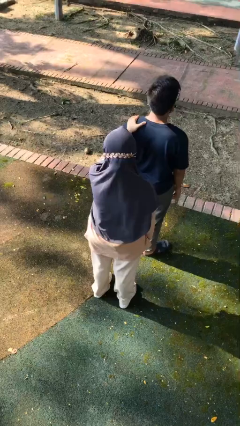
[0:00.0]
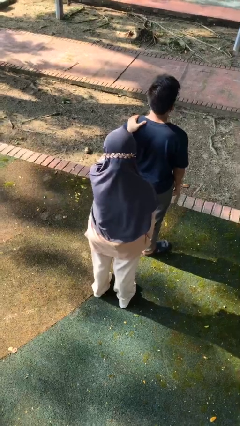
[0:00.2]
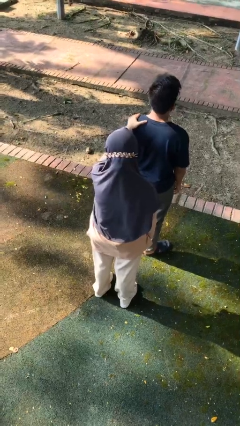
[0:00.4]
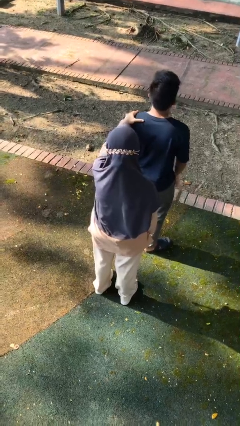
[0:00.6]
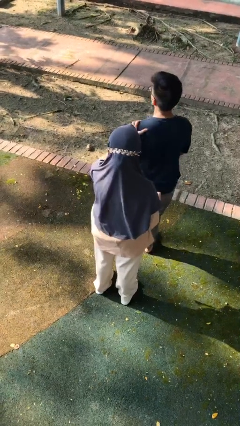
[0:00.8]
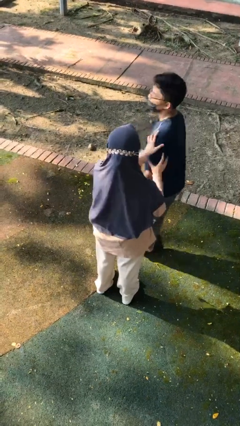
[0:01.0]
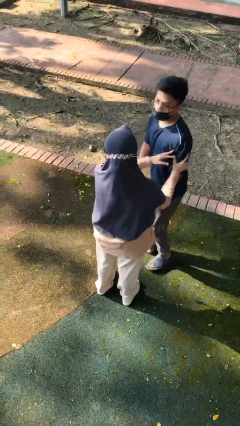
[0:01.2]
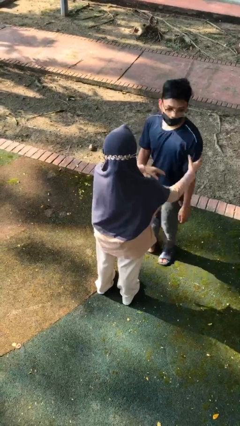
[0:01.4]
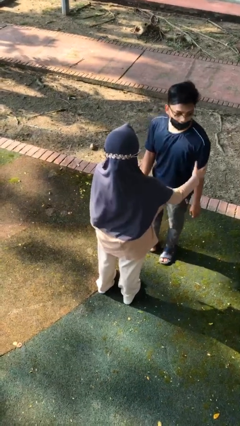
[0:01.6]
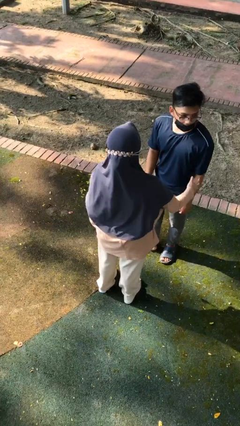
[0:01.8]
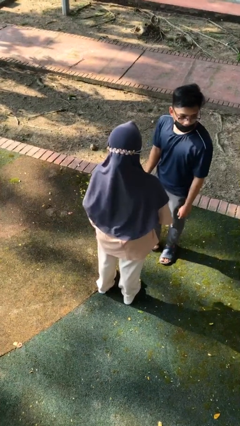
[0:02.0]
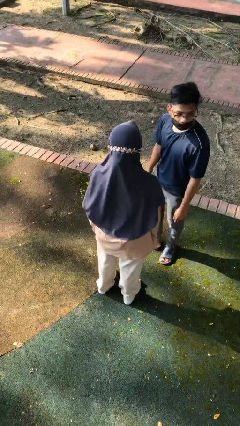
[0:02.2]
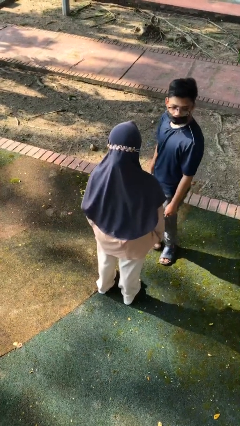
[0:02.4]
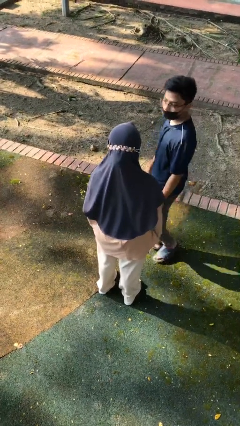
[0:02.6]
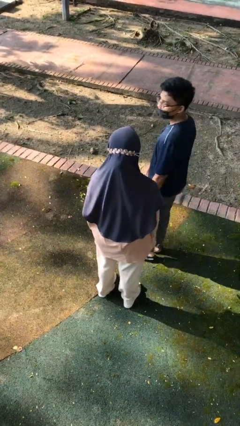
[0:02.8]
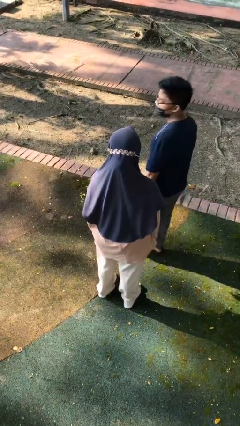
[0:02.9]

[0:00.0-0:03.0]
person spins person around

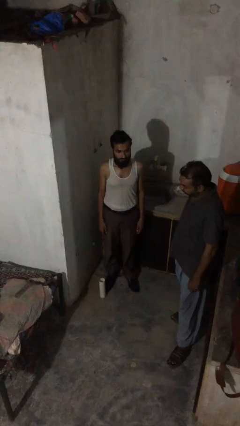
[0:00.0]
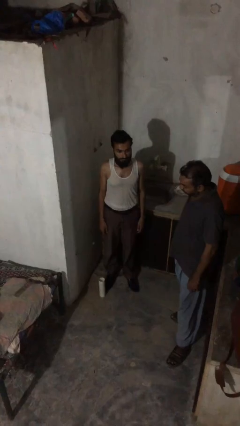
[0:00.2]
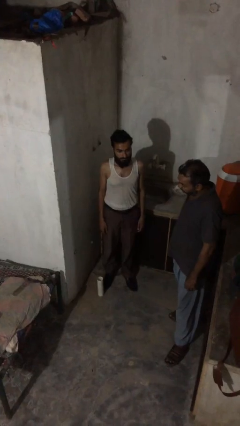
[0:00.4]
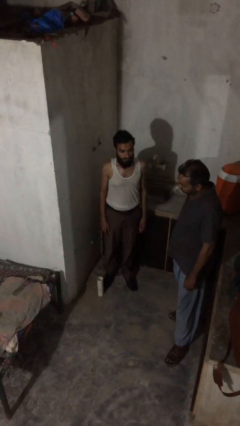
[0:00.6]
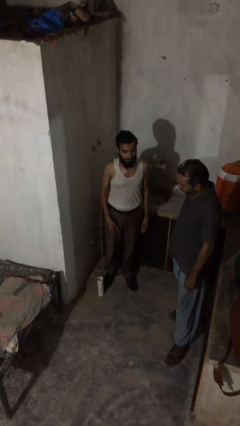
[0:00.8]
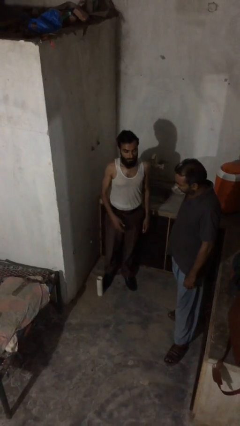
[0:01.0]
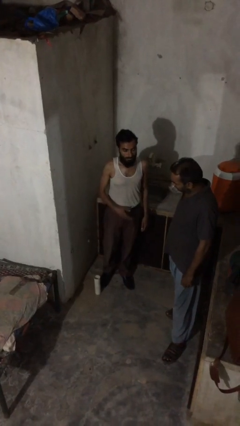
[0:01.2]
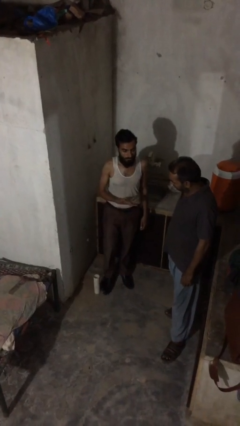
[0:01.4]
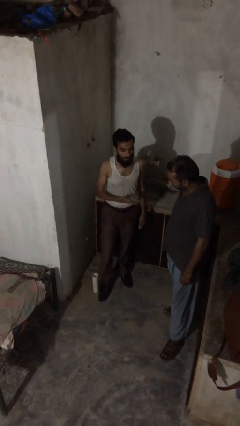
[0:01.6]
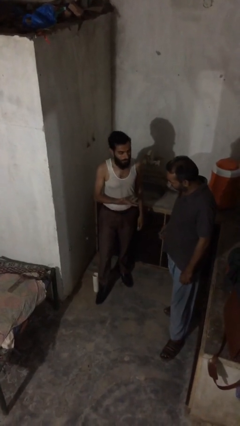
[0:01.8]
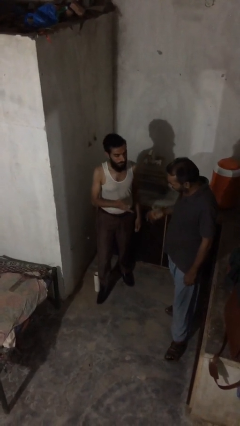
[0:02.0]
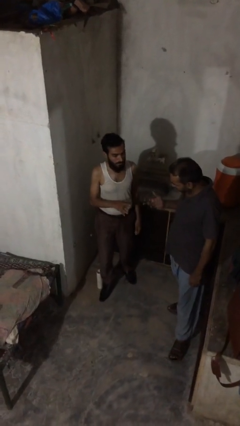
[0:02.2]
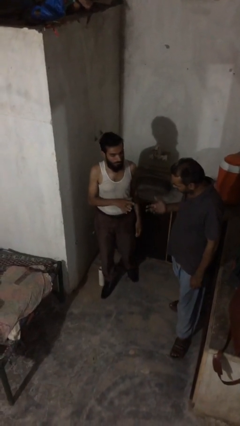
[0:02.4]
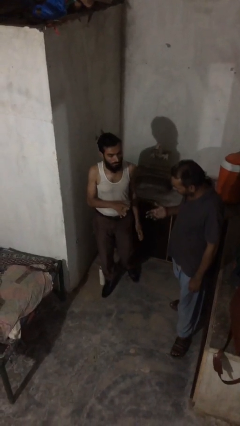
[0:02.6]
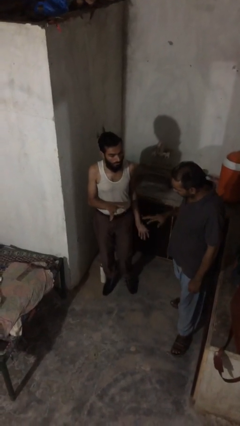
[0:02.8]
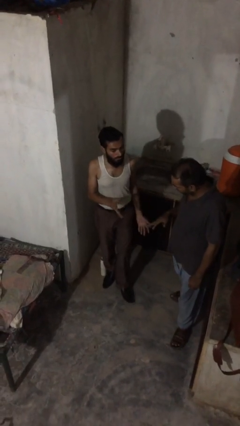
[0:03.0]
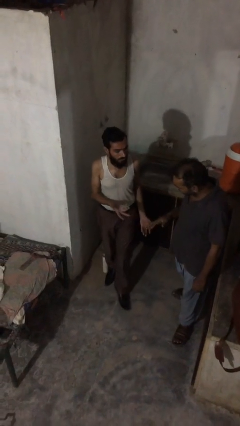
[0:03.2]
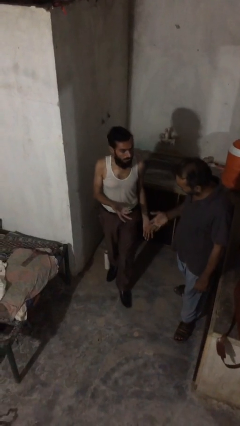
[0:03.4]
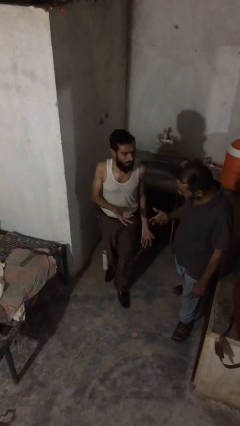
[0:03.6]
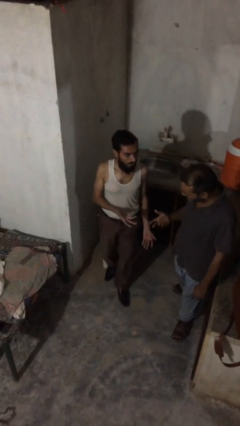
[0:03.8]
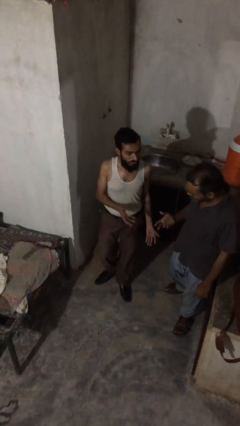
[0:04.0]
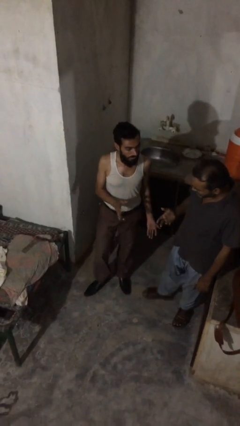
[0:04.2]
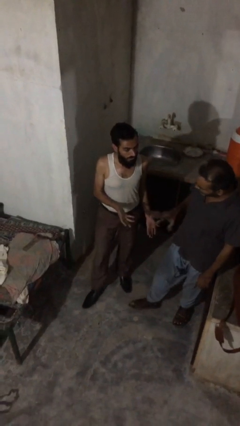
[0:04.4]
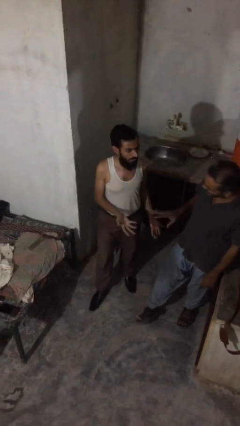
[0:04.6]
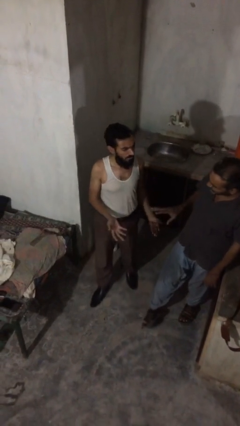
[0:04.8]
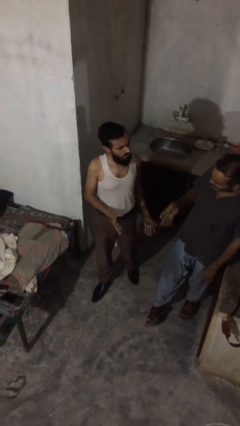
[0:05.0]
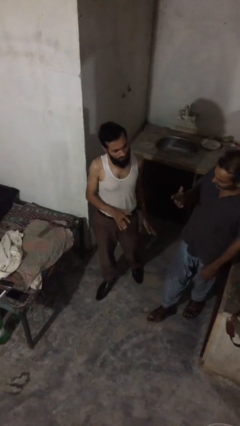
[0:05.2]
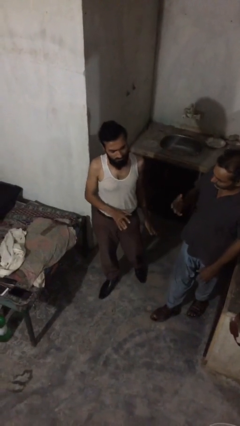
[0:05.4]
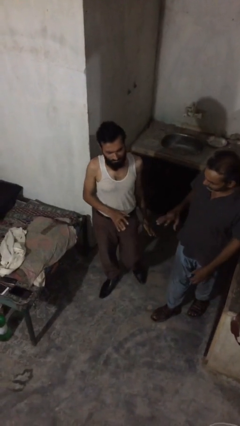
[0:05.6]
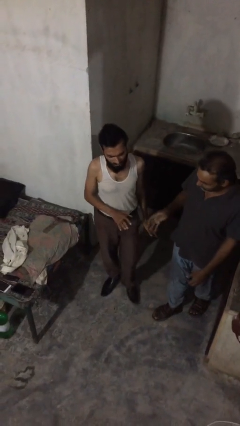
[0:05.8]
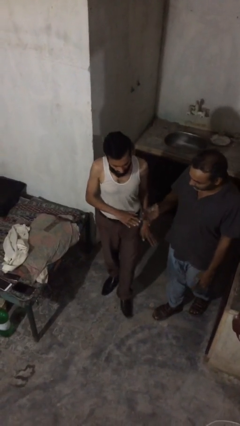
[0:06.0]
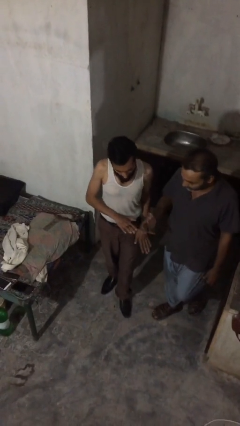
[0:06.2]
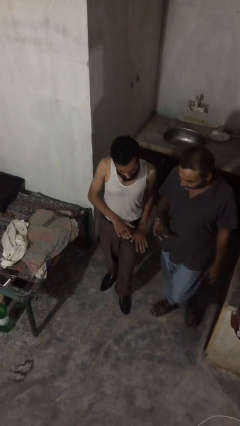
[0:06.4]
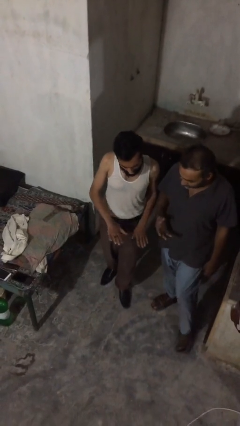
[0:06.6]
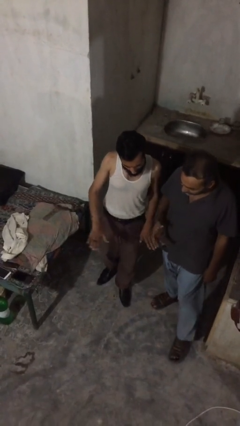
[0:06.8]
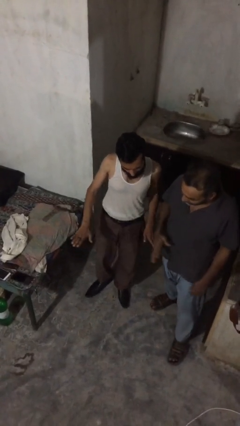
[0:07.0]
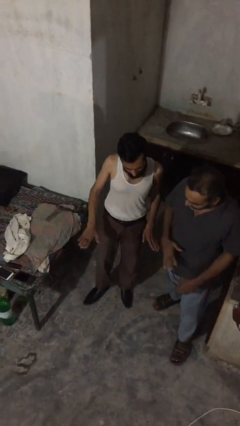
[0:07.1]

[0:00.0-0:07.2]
person talks to person

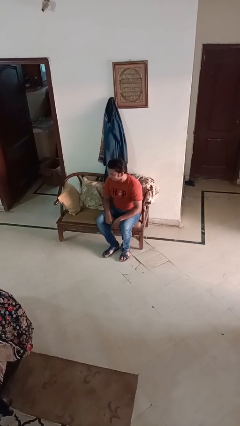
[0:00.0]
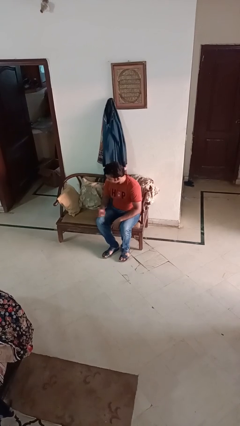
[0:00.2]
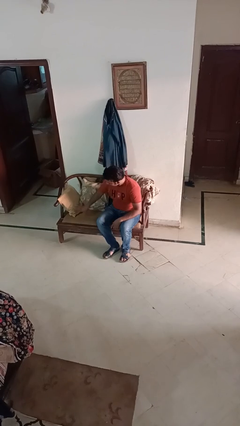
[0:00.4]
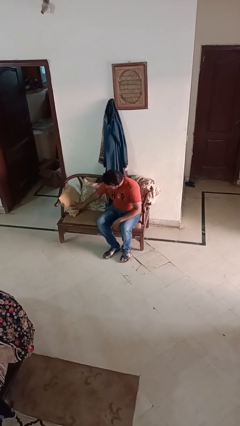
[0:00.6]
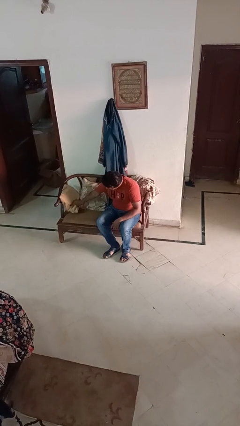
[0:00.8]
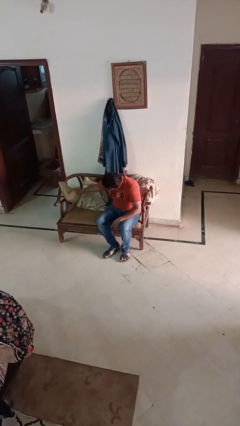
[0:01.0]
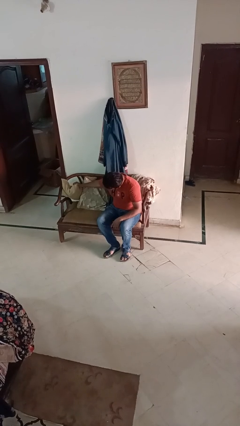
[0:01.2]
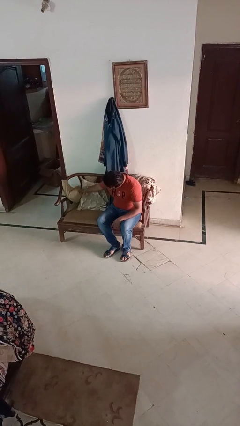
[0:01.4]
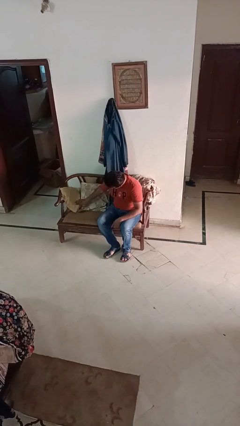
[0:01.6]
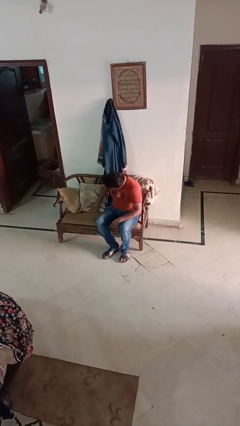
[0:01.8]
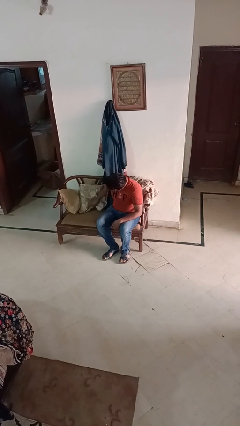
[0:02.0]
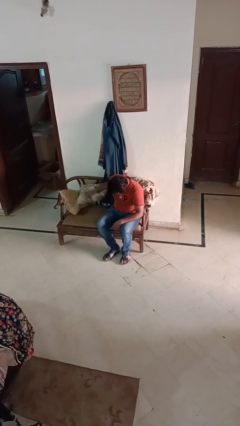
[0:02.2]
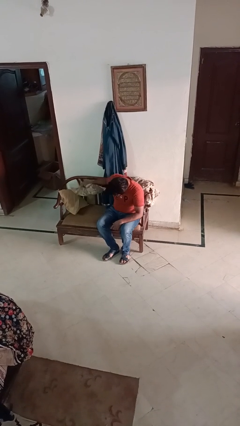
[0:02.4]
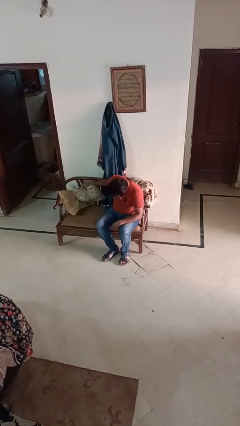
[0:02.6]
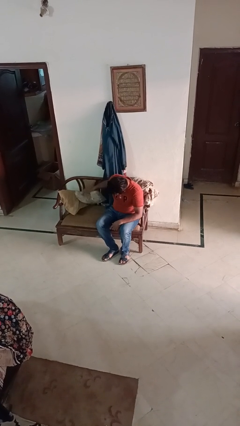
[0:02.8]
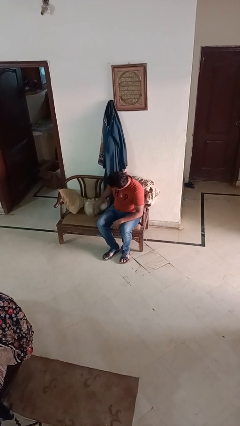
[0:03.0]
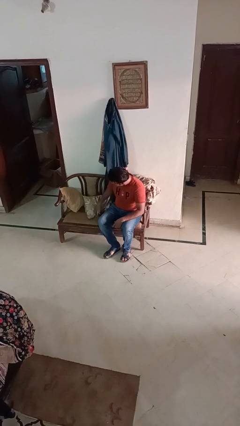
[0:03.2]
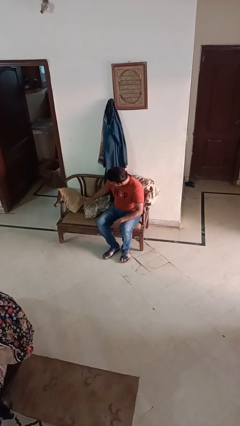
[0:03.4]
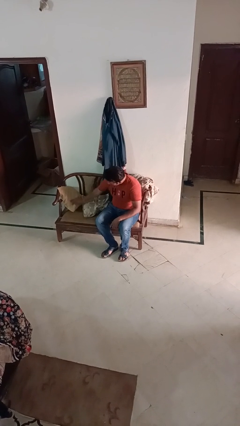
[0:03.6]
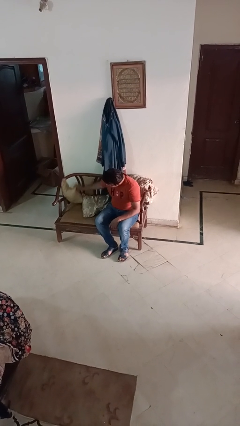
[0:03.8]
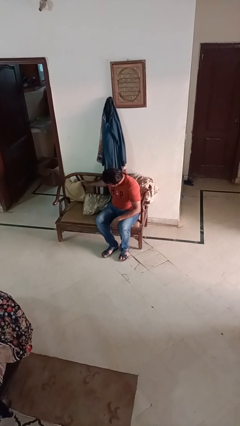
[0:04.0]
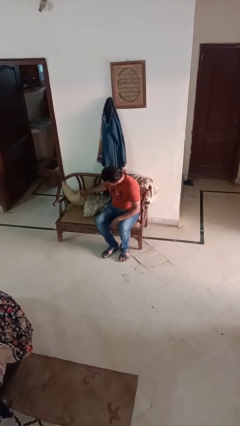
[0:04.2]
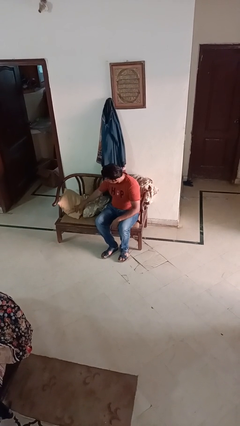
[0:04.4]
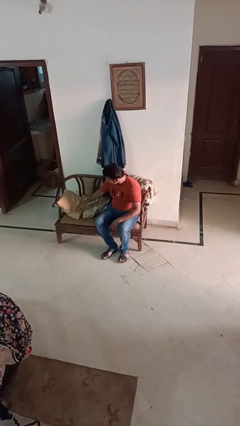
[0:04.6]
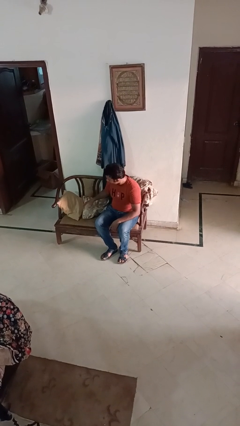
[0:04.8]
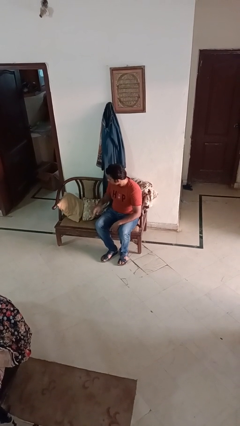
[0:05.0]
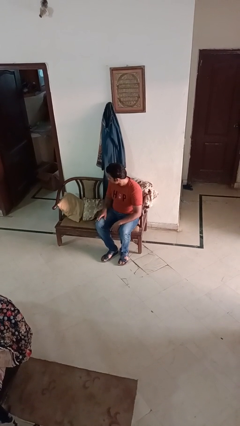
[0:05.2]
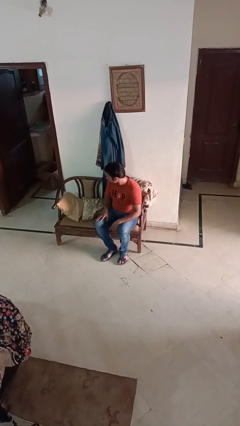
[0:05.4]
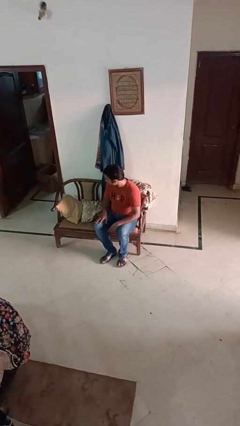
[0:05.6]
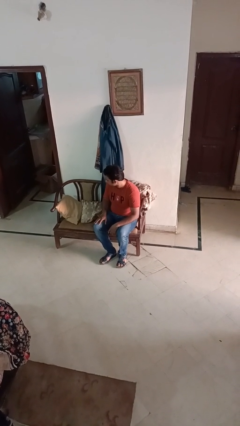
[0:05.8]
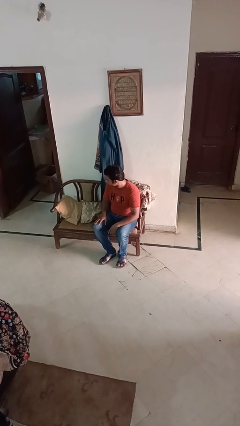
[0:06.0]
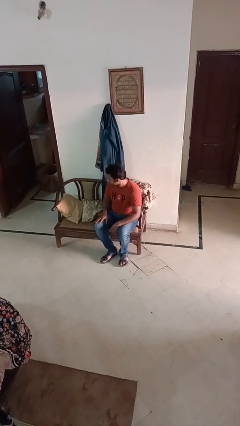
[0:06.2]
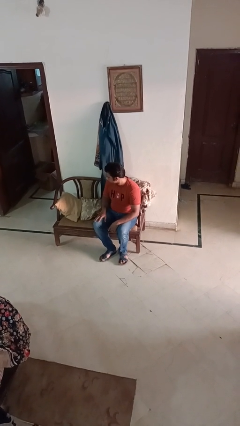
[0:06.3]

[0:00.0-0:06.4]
person searches in couch

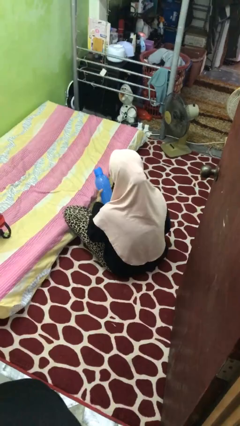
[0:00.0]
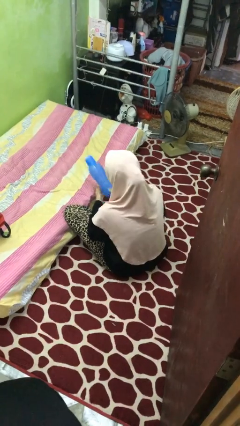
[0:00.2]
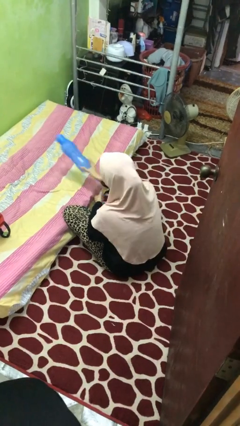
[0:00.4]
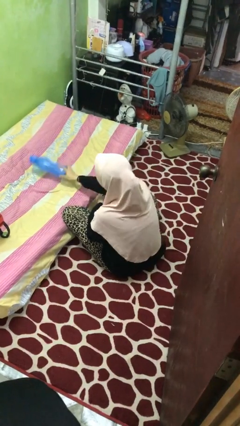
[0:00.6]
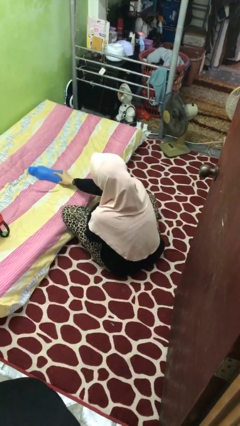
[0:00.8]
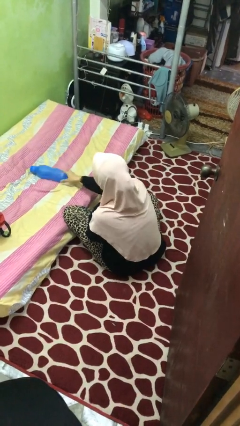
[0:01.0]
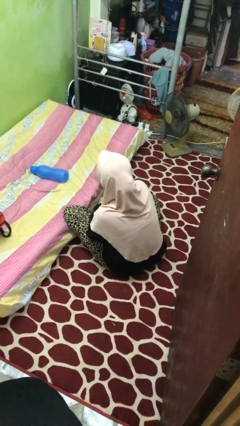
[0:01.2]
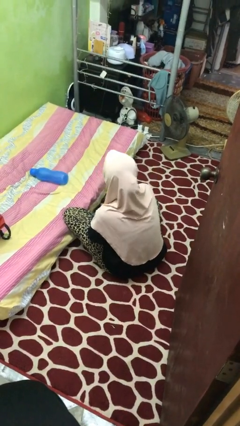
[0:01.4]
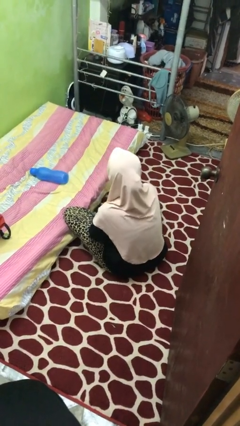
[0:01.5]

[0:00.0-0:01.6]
person puts down object on bed
